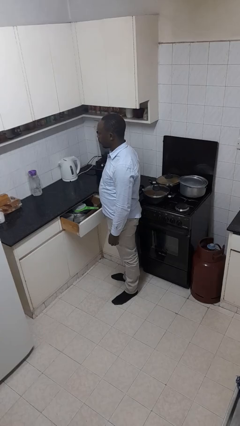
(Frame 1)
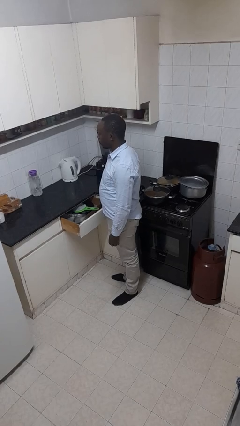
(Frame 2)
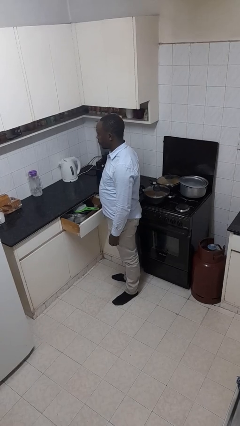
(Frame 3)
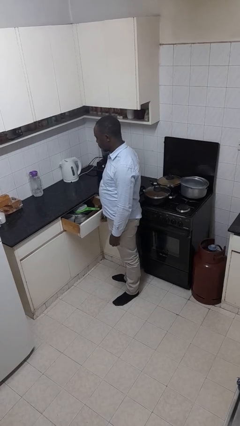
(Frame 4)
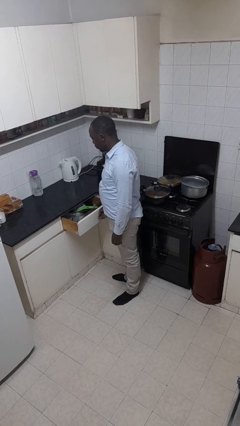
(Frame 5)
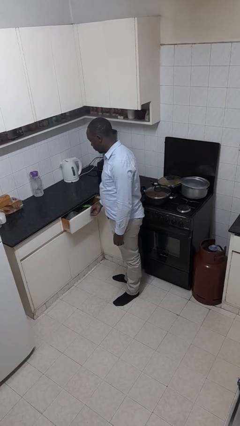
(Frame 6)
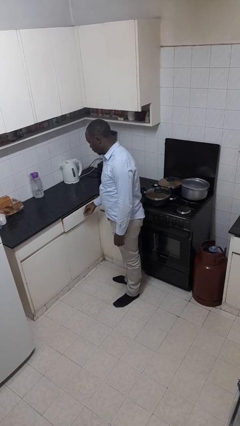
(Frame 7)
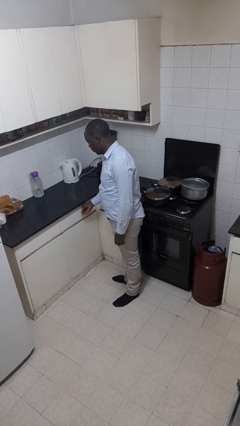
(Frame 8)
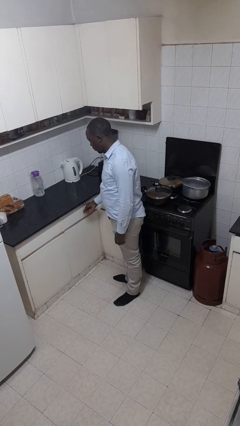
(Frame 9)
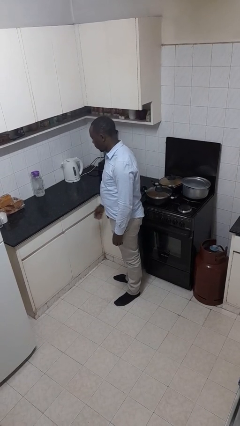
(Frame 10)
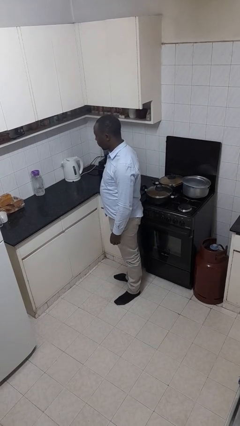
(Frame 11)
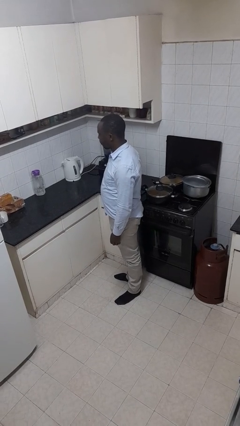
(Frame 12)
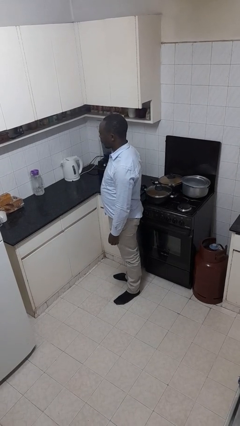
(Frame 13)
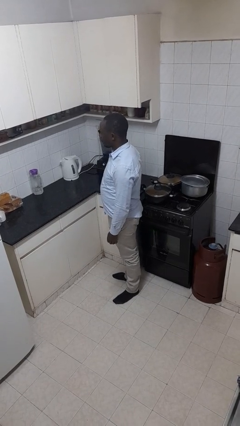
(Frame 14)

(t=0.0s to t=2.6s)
person closes kitchen drawer

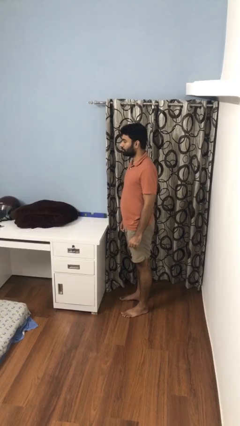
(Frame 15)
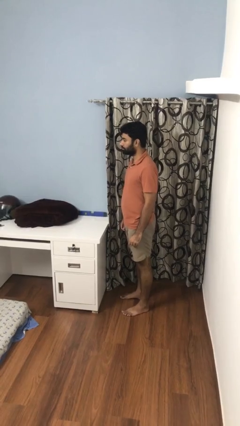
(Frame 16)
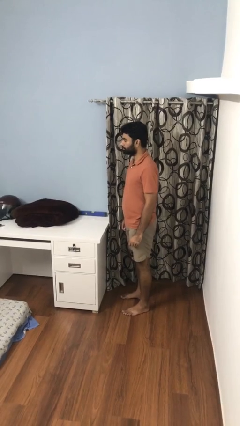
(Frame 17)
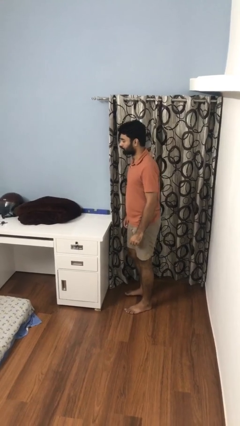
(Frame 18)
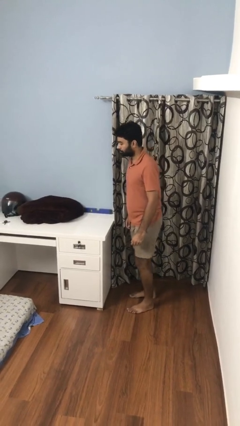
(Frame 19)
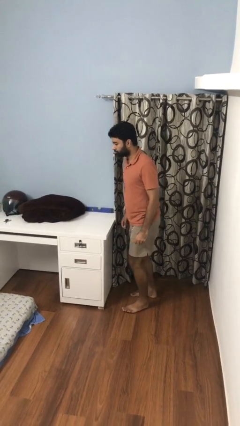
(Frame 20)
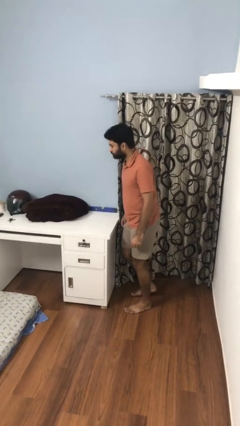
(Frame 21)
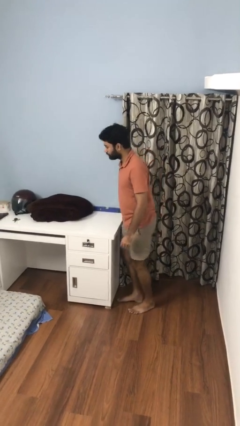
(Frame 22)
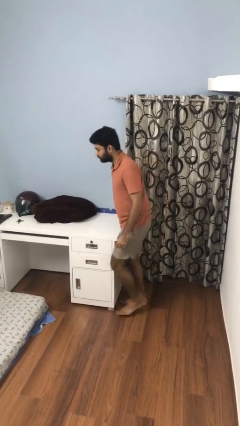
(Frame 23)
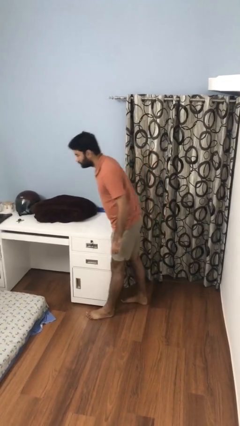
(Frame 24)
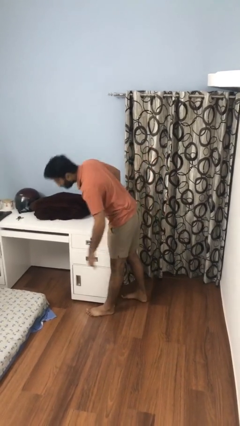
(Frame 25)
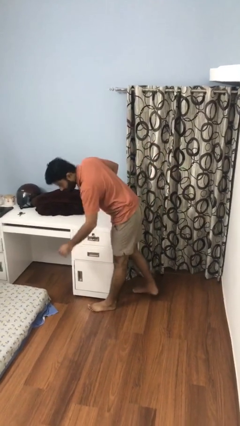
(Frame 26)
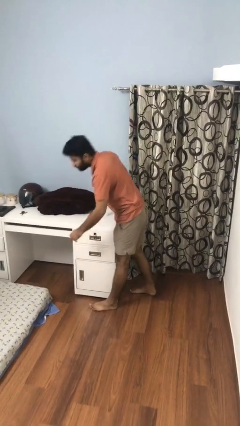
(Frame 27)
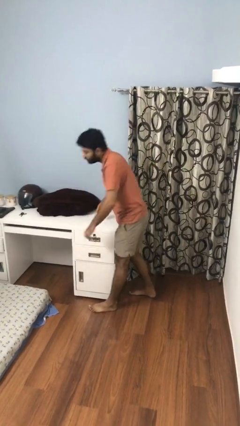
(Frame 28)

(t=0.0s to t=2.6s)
person bumps into table

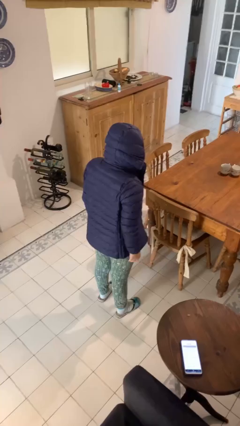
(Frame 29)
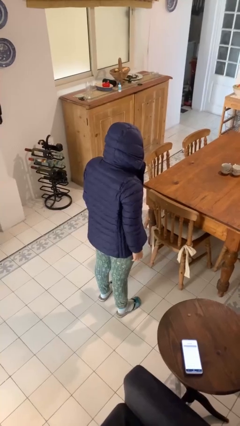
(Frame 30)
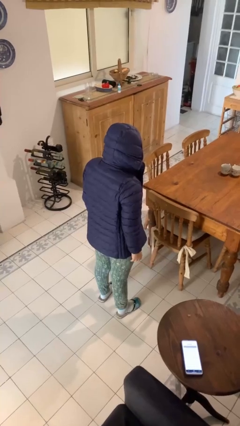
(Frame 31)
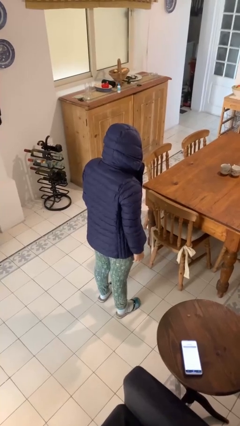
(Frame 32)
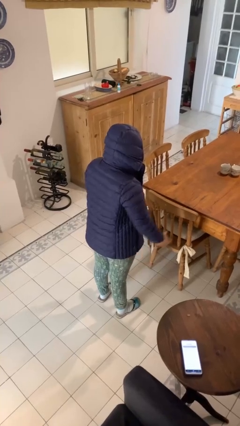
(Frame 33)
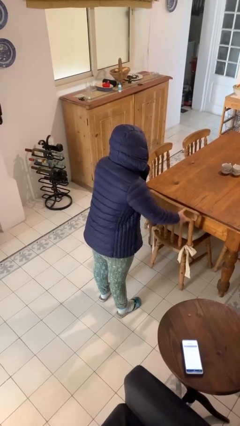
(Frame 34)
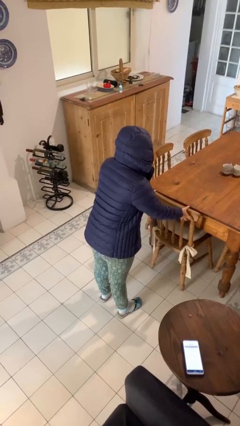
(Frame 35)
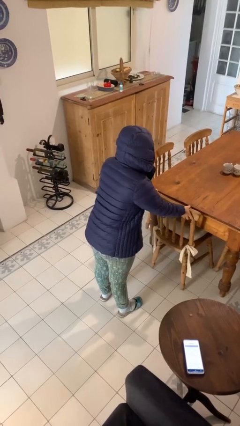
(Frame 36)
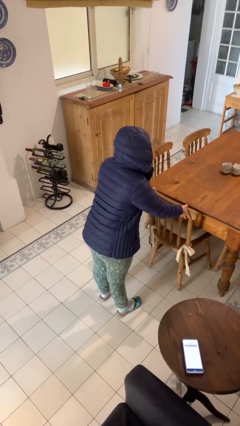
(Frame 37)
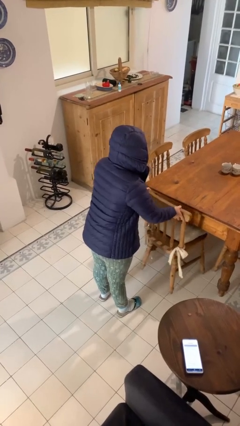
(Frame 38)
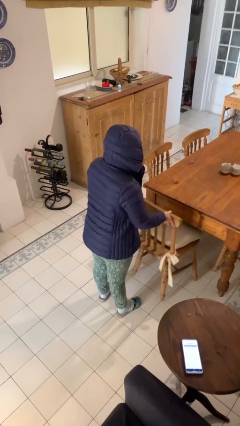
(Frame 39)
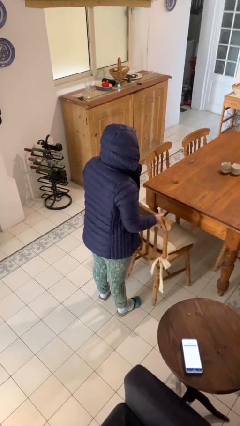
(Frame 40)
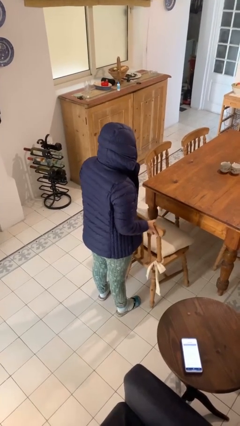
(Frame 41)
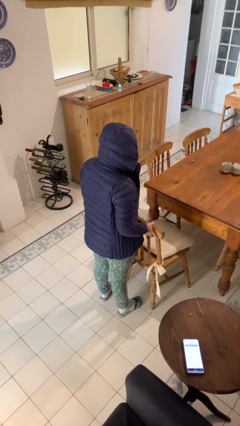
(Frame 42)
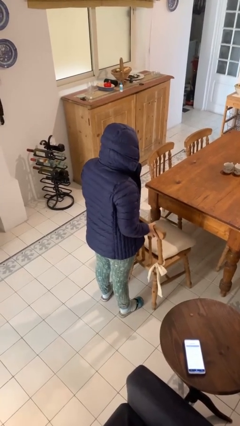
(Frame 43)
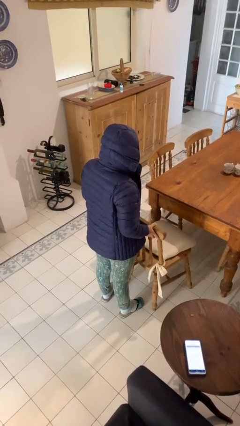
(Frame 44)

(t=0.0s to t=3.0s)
person pulls out chair

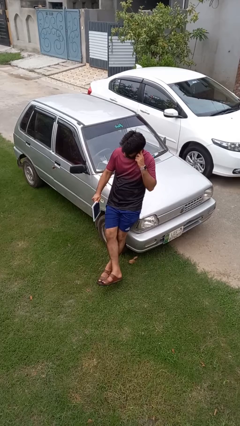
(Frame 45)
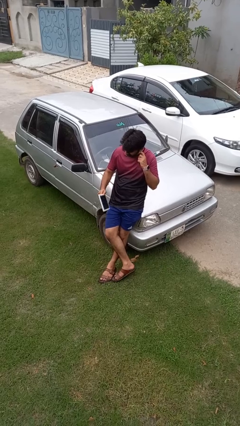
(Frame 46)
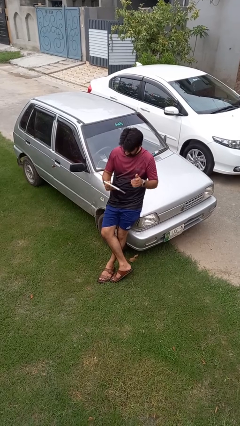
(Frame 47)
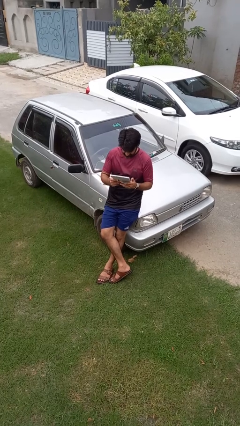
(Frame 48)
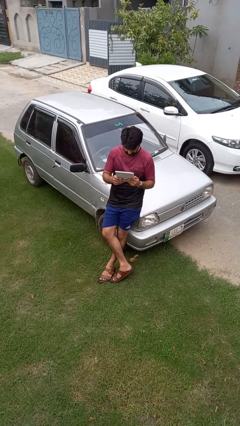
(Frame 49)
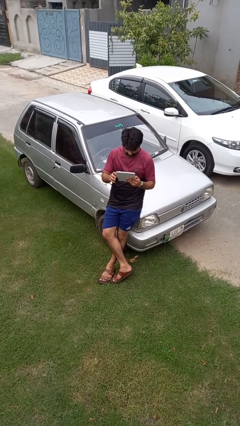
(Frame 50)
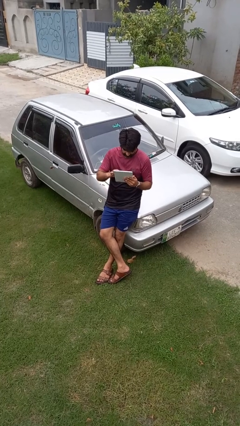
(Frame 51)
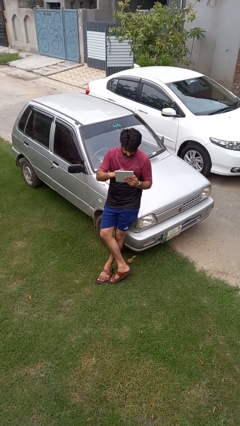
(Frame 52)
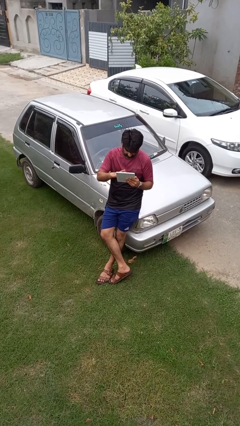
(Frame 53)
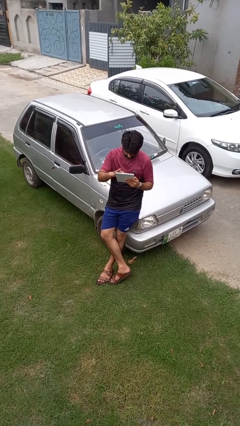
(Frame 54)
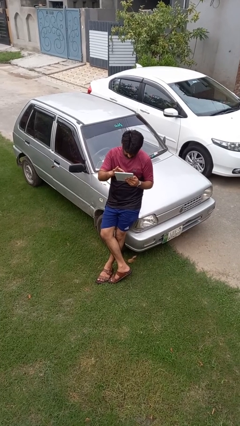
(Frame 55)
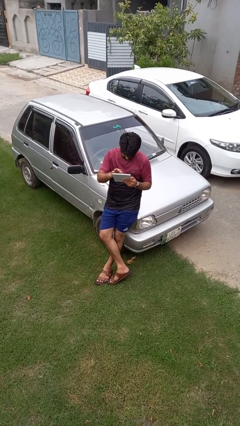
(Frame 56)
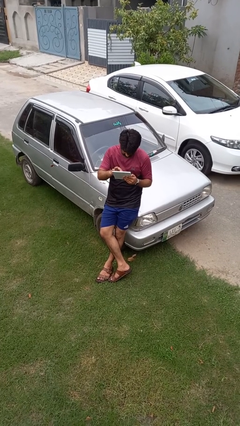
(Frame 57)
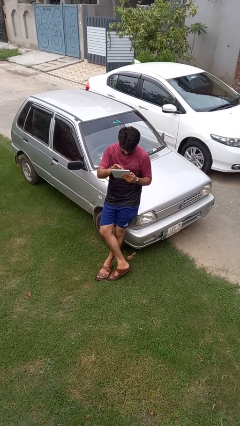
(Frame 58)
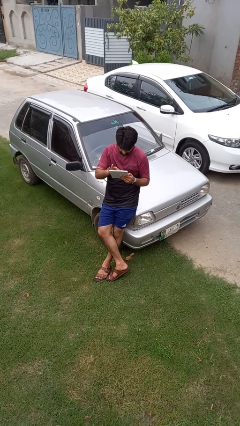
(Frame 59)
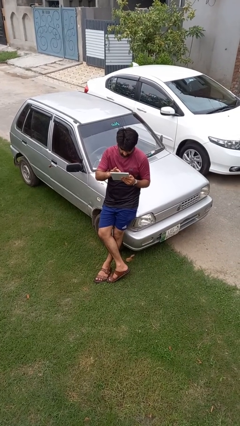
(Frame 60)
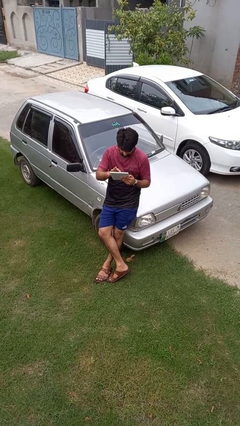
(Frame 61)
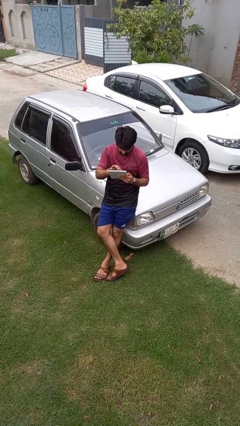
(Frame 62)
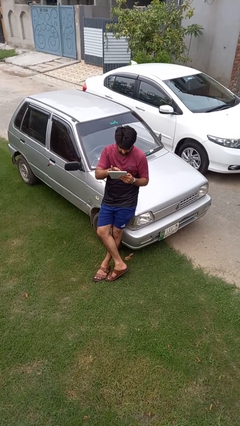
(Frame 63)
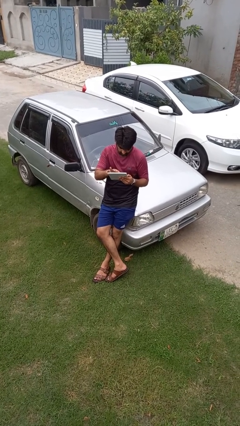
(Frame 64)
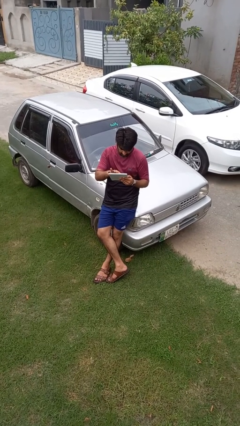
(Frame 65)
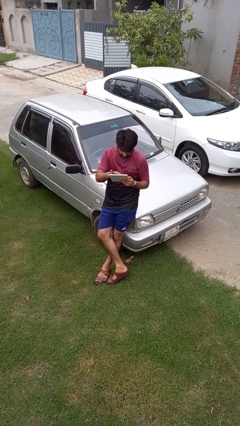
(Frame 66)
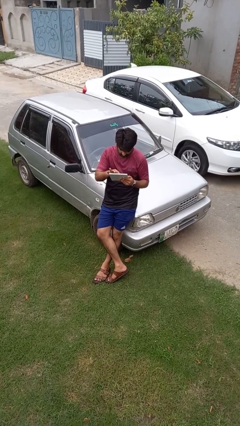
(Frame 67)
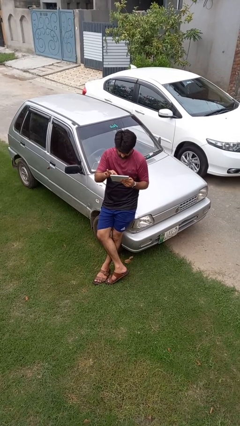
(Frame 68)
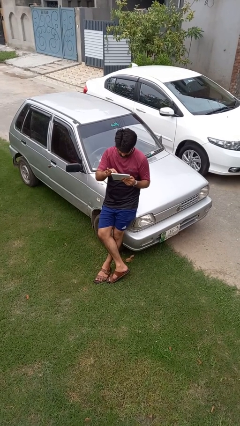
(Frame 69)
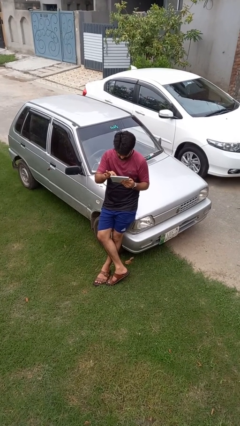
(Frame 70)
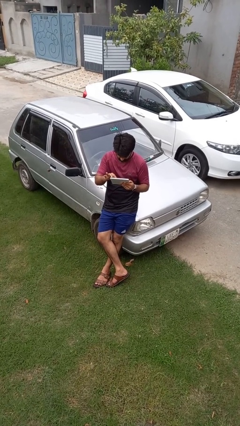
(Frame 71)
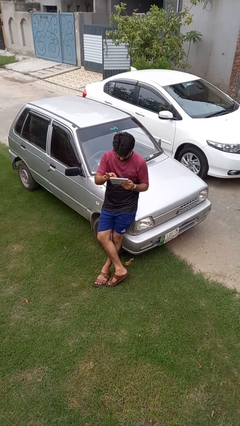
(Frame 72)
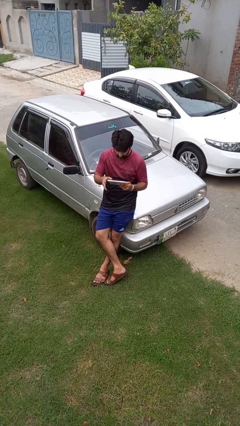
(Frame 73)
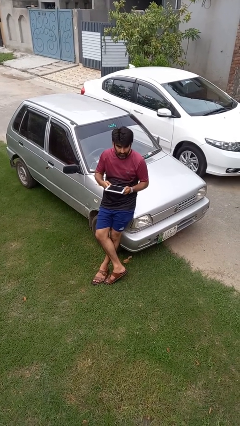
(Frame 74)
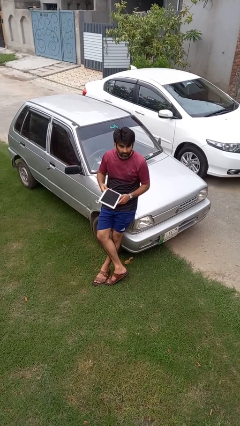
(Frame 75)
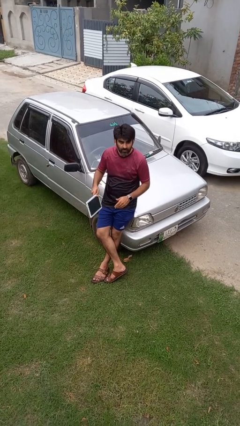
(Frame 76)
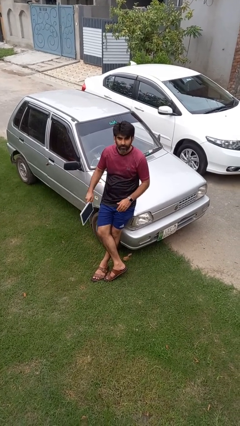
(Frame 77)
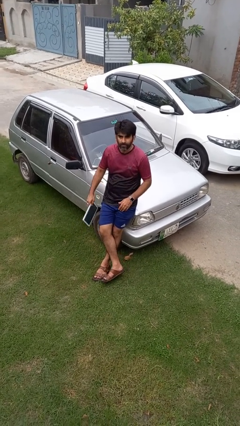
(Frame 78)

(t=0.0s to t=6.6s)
person interacts with tablet

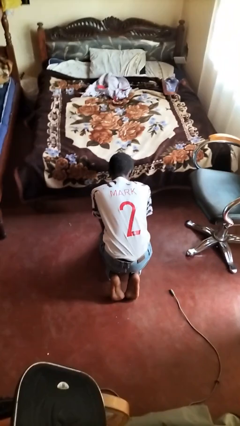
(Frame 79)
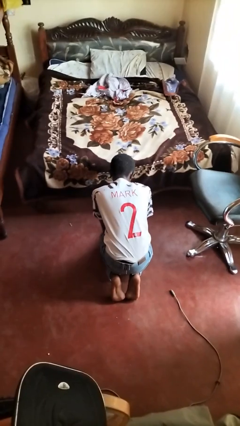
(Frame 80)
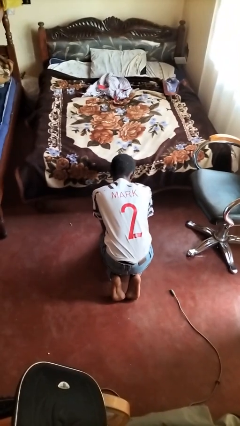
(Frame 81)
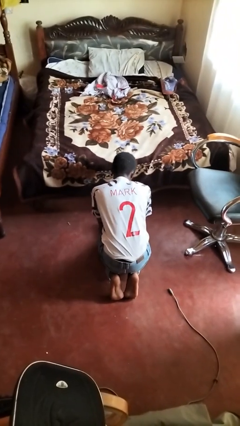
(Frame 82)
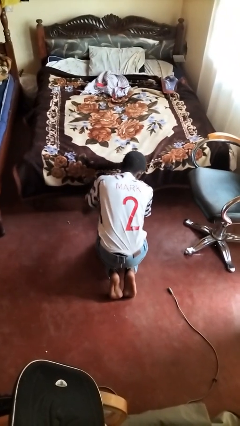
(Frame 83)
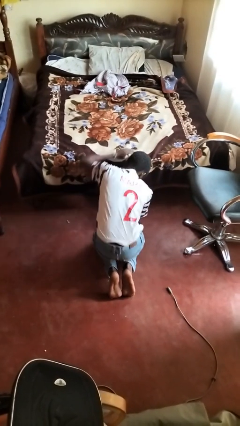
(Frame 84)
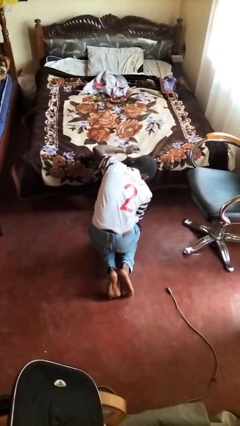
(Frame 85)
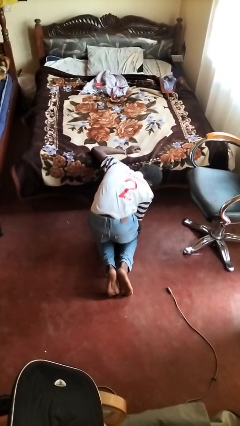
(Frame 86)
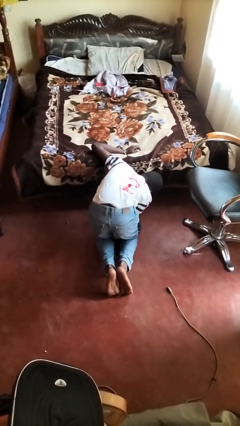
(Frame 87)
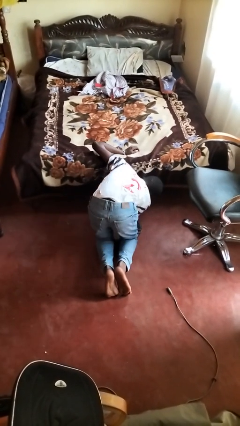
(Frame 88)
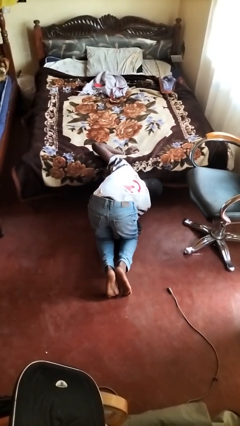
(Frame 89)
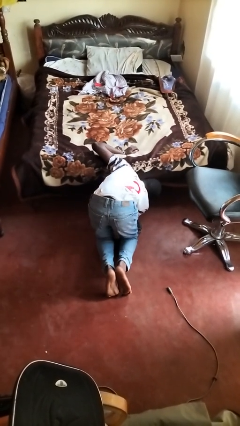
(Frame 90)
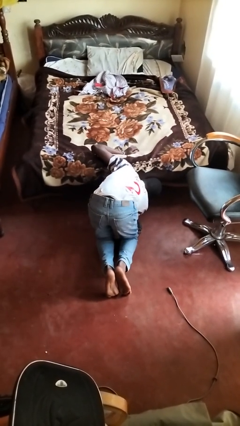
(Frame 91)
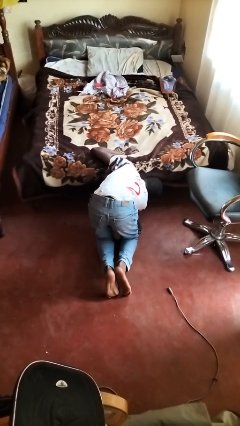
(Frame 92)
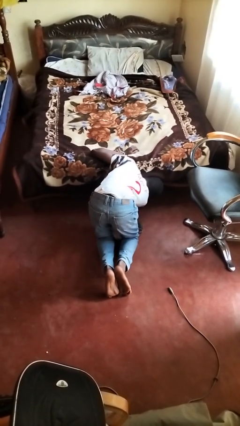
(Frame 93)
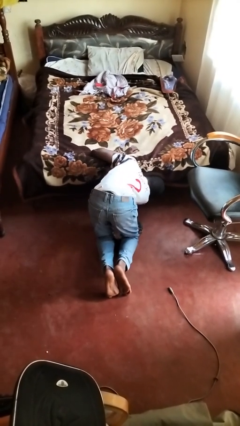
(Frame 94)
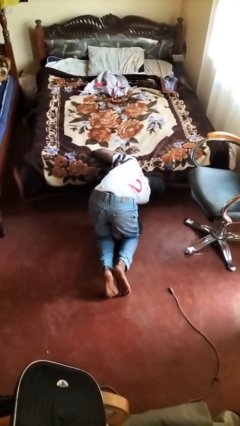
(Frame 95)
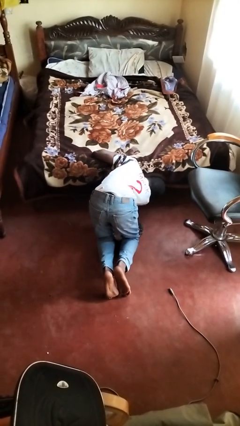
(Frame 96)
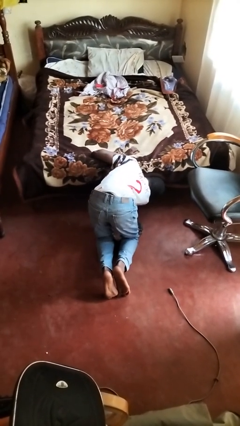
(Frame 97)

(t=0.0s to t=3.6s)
person searches under bed
